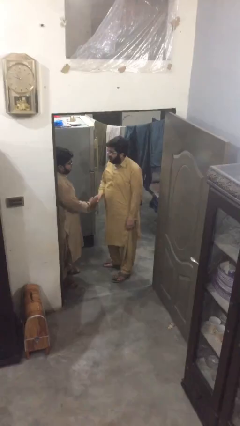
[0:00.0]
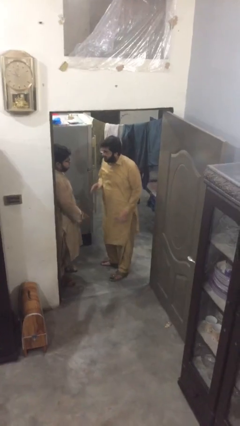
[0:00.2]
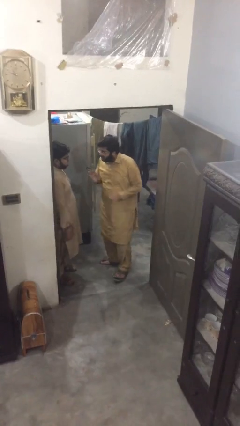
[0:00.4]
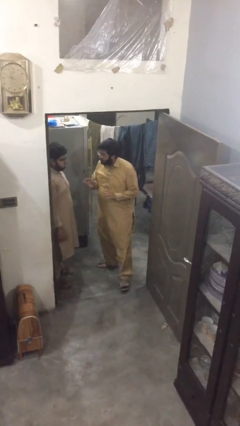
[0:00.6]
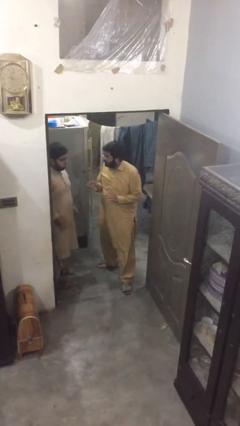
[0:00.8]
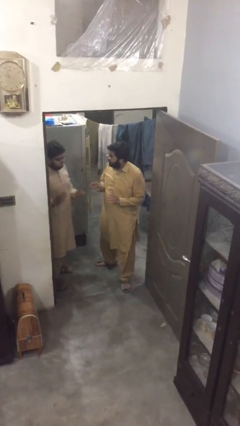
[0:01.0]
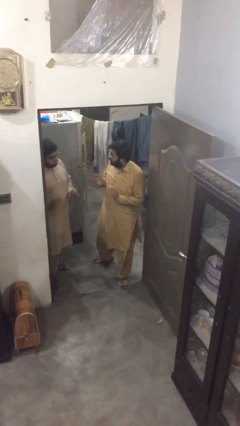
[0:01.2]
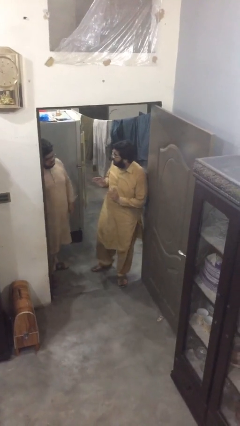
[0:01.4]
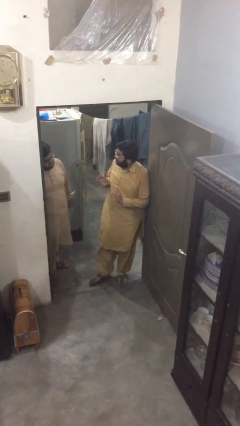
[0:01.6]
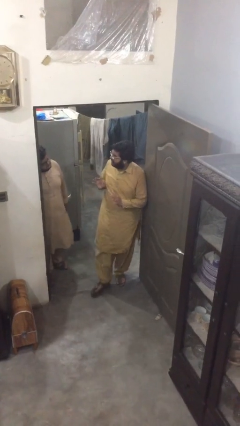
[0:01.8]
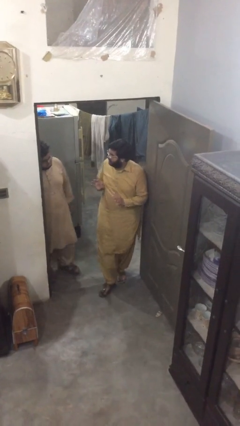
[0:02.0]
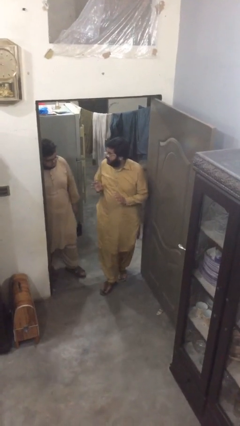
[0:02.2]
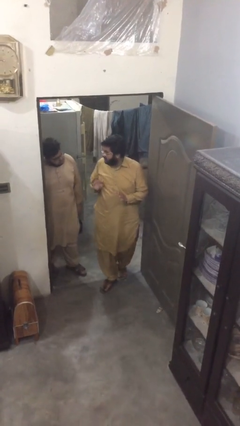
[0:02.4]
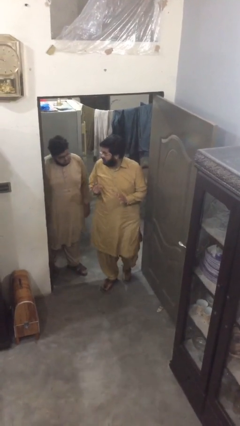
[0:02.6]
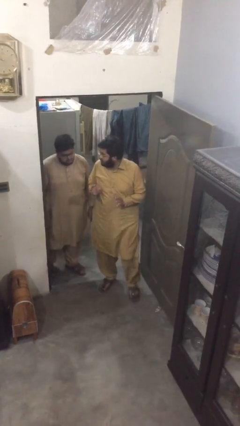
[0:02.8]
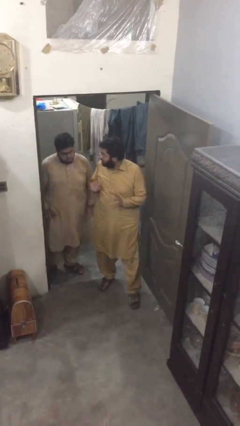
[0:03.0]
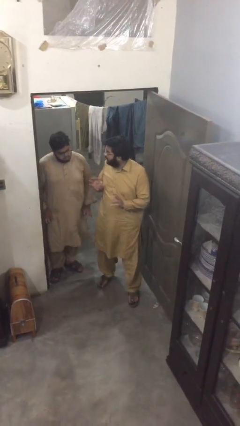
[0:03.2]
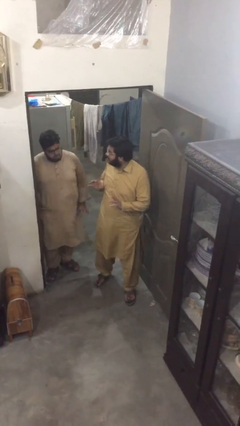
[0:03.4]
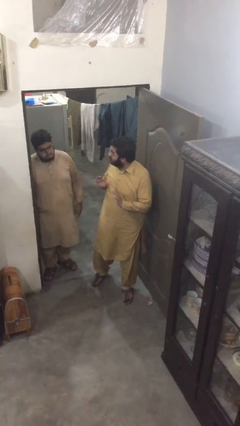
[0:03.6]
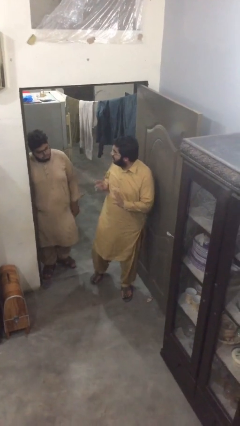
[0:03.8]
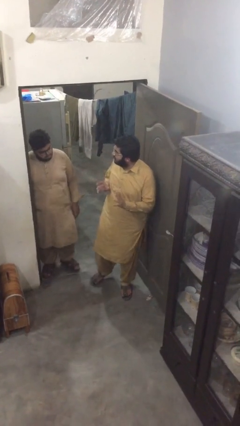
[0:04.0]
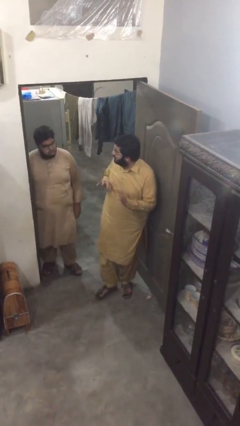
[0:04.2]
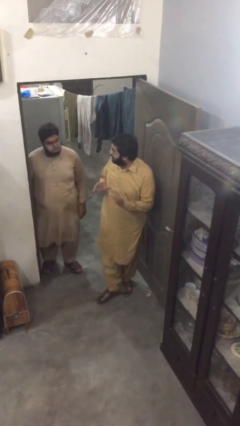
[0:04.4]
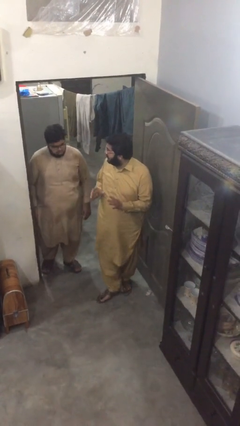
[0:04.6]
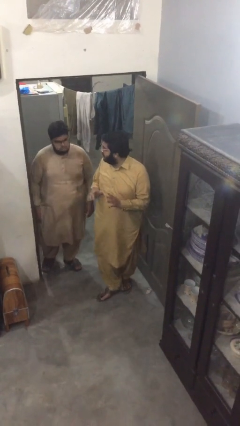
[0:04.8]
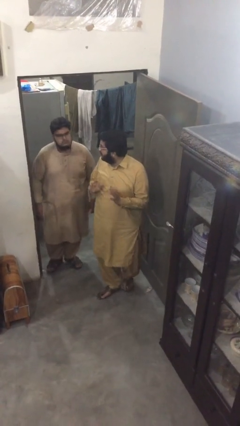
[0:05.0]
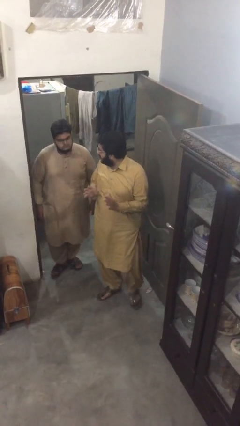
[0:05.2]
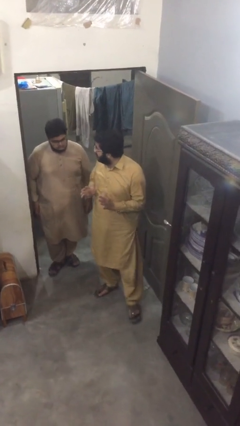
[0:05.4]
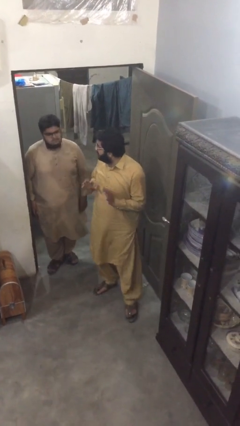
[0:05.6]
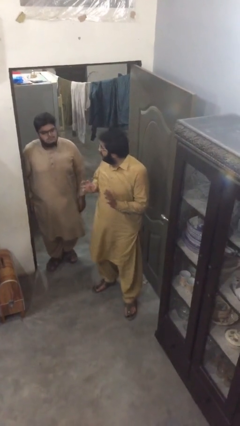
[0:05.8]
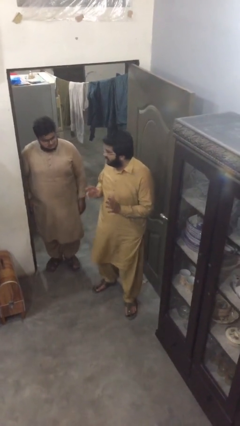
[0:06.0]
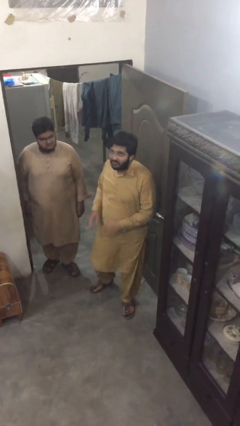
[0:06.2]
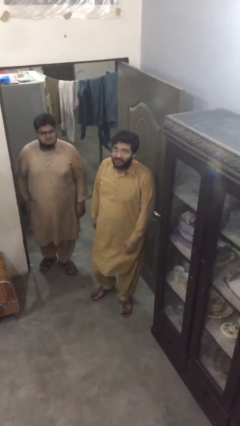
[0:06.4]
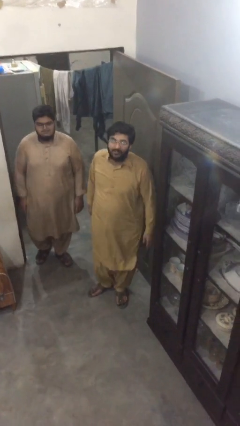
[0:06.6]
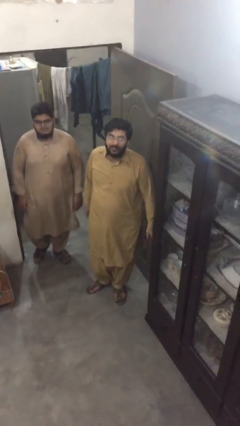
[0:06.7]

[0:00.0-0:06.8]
person talks to person

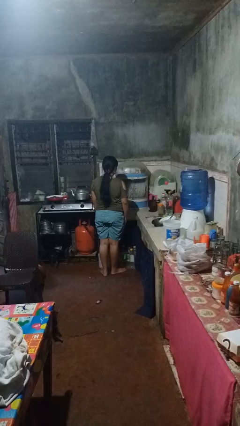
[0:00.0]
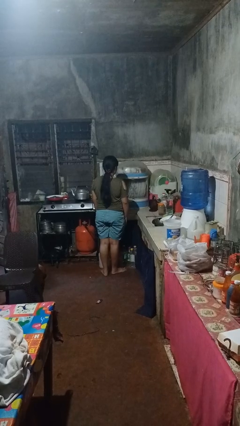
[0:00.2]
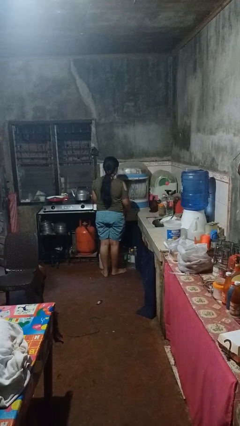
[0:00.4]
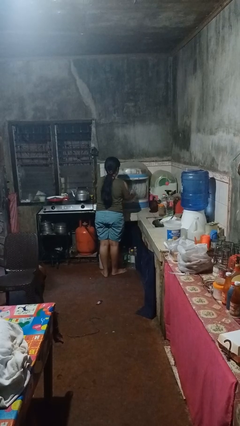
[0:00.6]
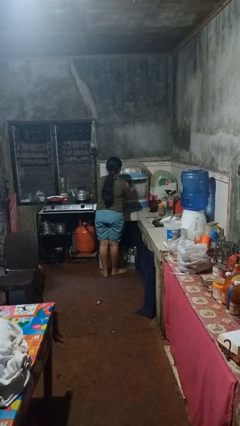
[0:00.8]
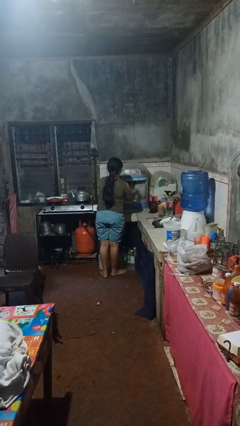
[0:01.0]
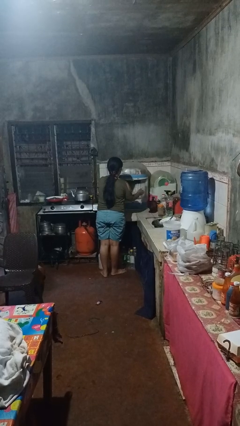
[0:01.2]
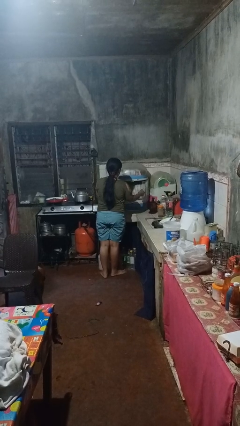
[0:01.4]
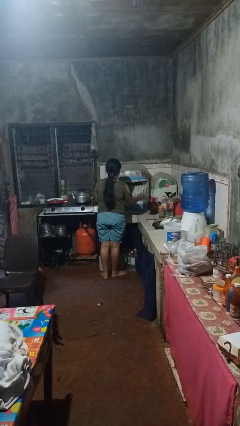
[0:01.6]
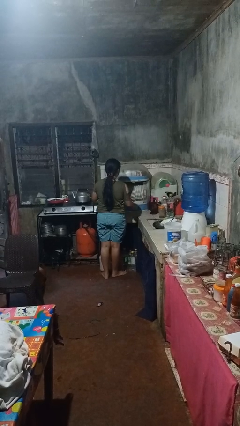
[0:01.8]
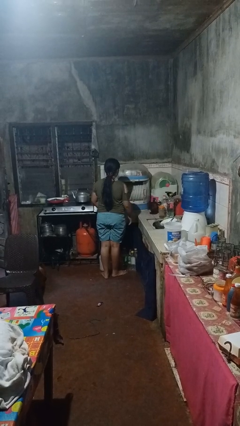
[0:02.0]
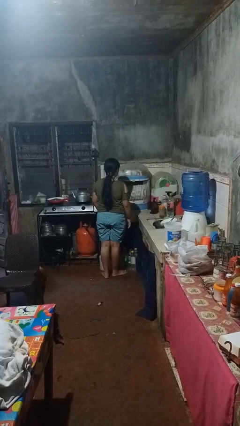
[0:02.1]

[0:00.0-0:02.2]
person opens kitchen drawer

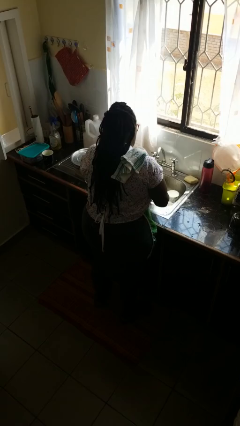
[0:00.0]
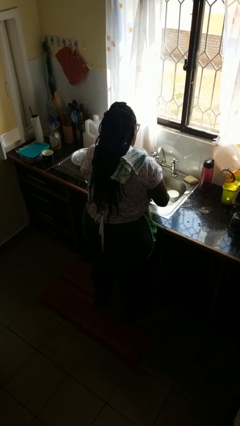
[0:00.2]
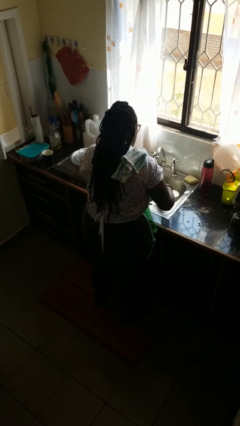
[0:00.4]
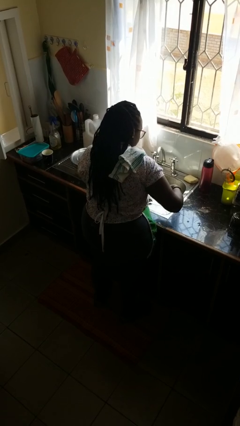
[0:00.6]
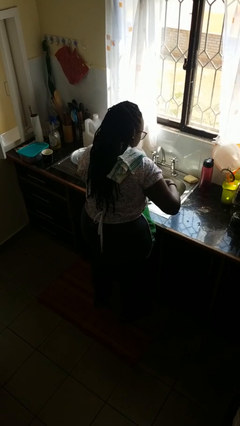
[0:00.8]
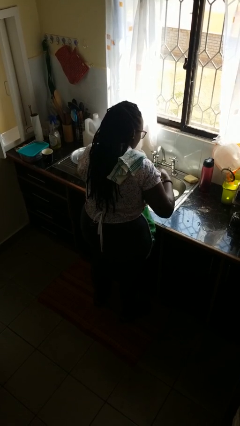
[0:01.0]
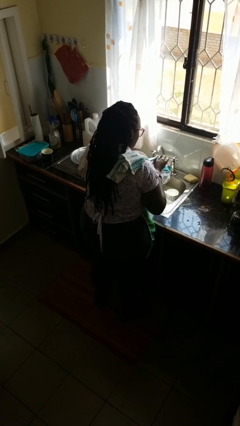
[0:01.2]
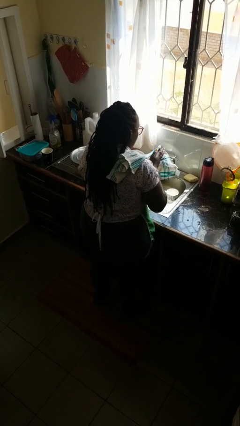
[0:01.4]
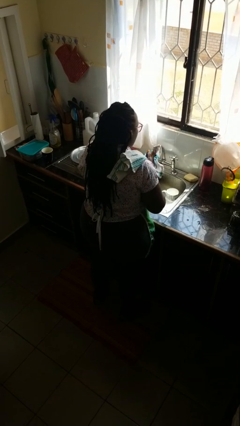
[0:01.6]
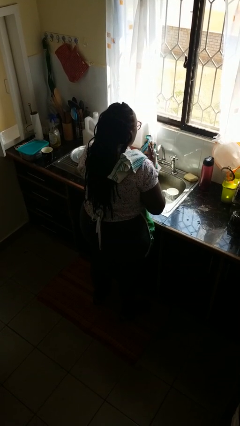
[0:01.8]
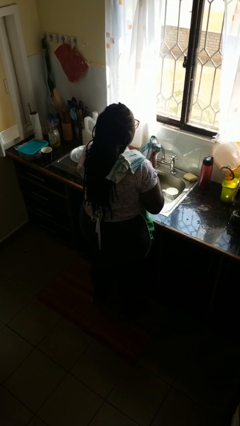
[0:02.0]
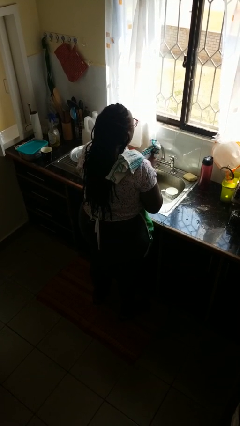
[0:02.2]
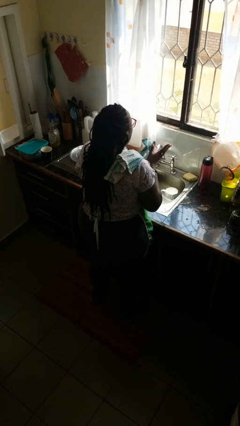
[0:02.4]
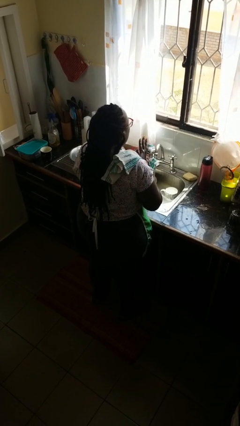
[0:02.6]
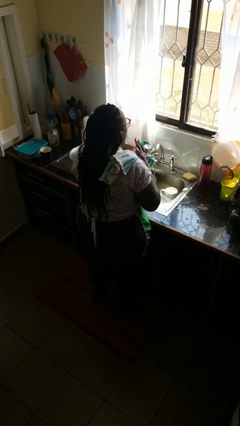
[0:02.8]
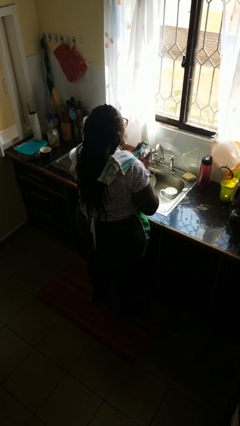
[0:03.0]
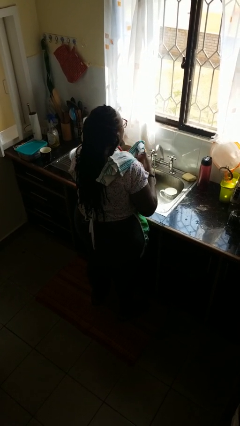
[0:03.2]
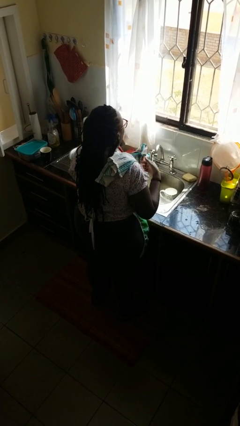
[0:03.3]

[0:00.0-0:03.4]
person dries hands with towel

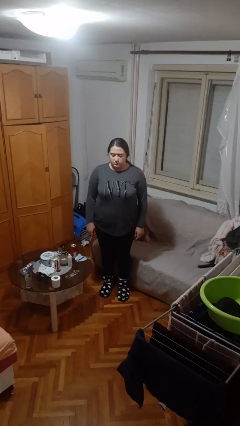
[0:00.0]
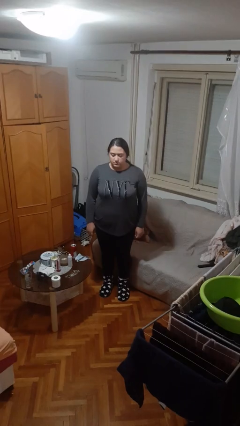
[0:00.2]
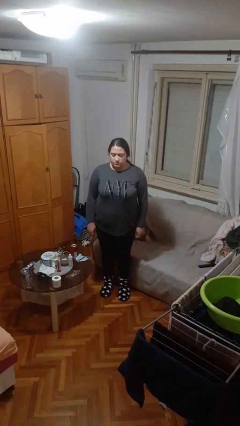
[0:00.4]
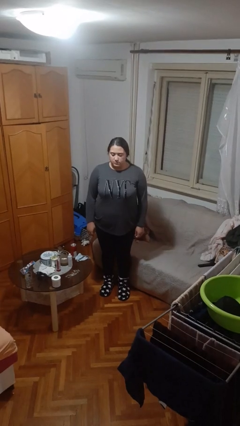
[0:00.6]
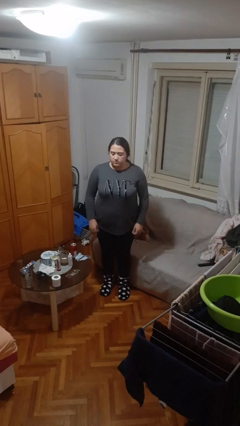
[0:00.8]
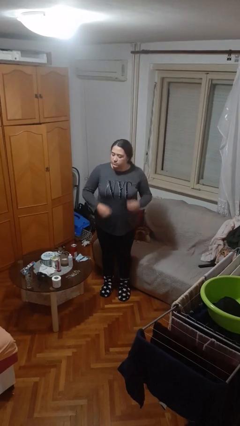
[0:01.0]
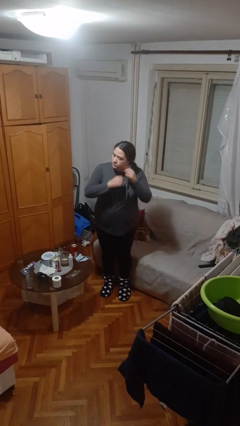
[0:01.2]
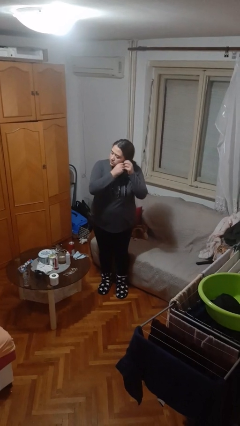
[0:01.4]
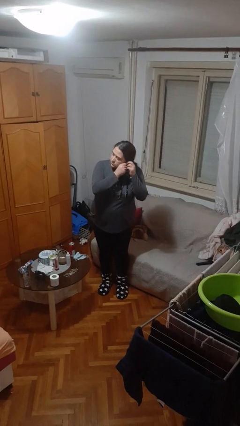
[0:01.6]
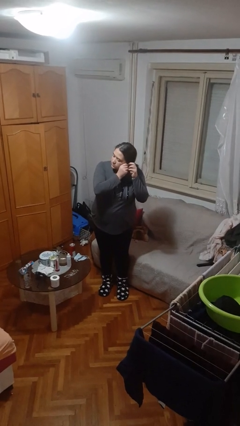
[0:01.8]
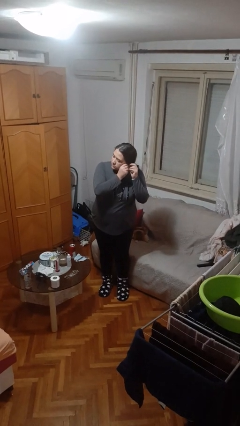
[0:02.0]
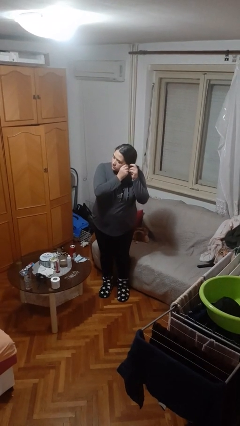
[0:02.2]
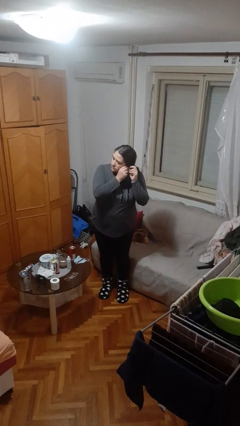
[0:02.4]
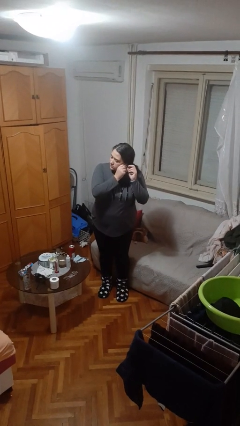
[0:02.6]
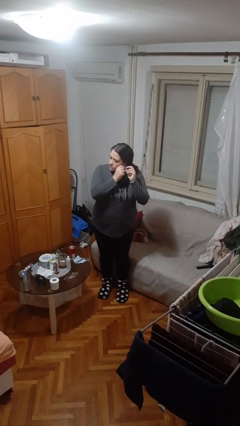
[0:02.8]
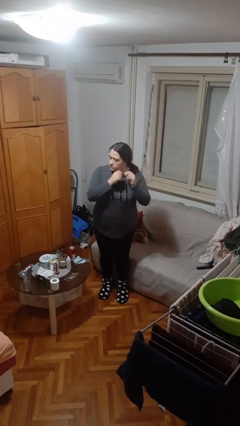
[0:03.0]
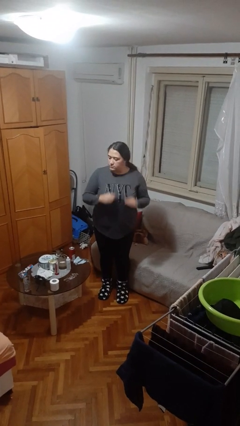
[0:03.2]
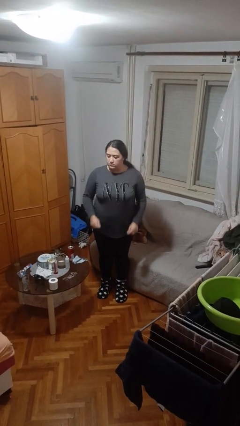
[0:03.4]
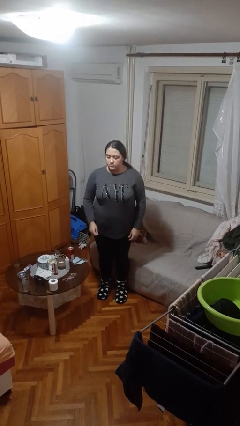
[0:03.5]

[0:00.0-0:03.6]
person puts on earrings

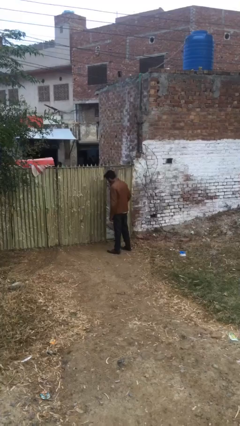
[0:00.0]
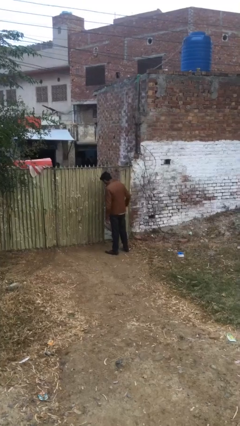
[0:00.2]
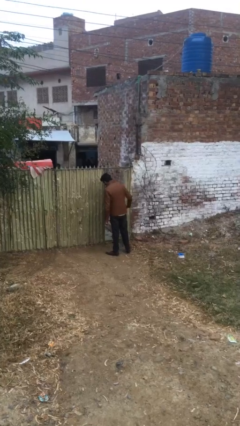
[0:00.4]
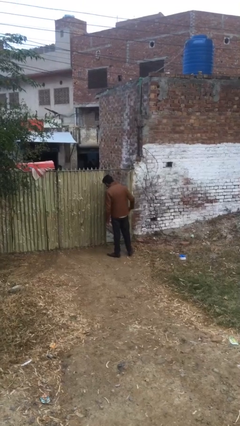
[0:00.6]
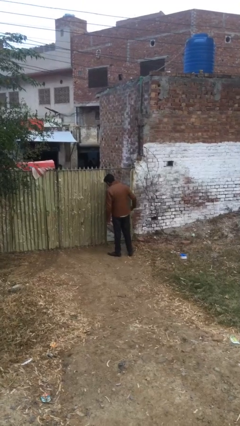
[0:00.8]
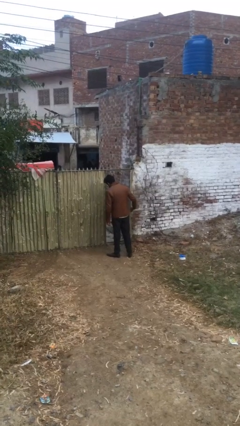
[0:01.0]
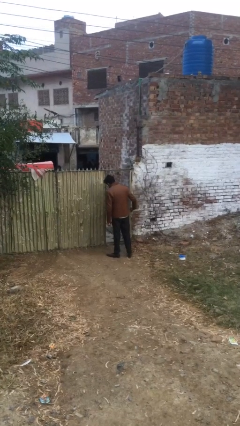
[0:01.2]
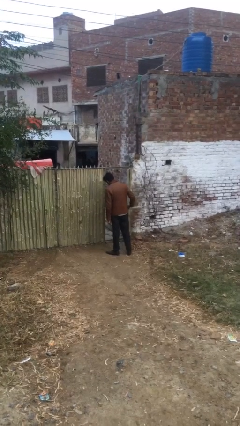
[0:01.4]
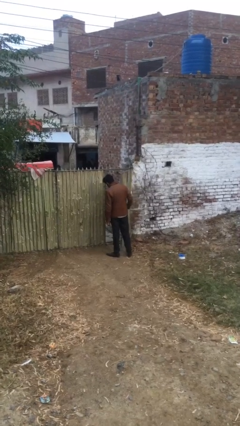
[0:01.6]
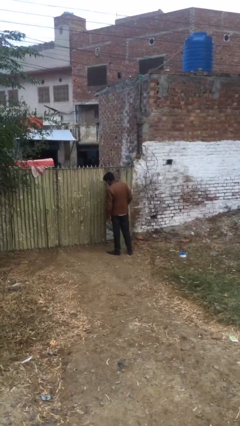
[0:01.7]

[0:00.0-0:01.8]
person opens facility door
